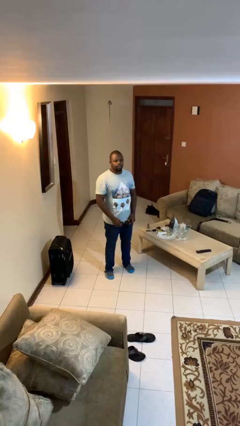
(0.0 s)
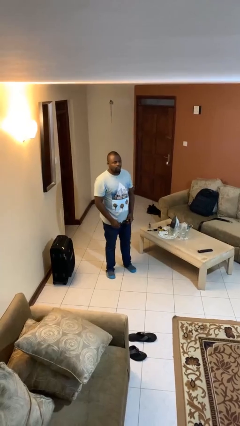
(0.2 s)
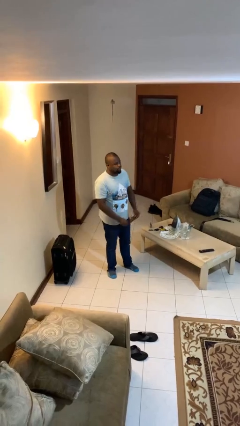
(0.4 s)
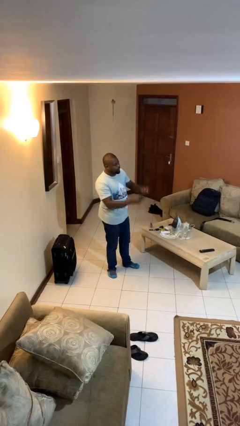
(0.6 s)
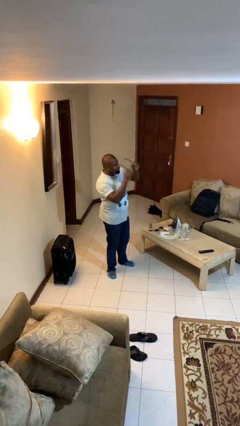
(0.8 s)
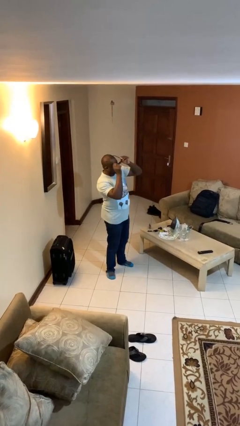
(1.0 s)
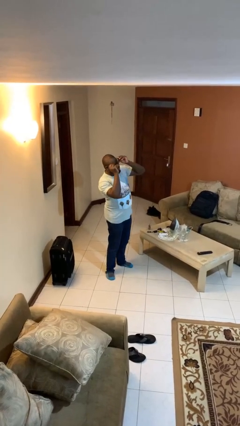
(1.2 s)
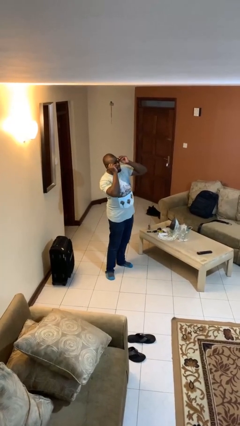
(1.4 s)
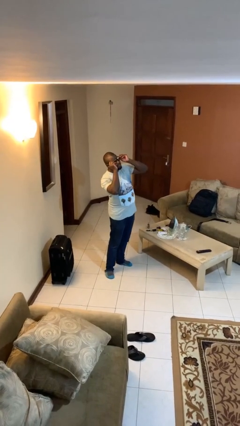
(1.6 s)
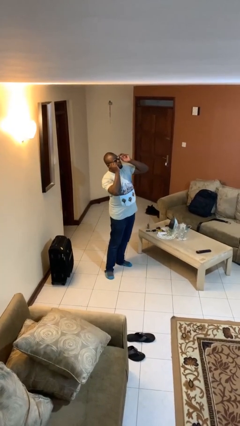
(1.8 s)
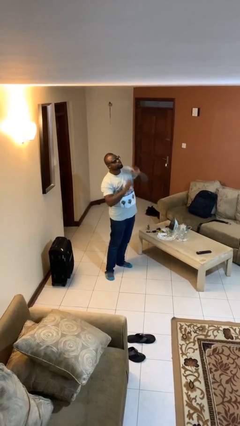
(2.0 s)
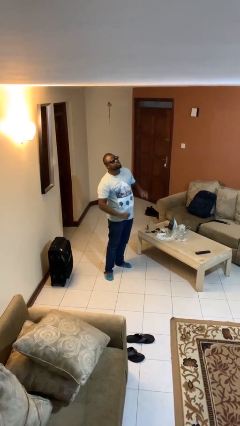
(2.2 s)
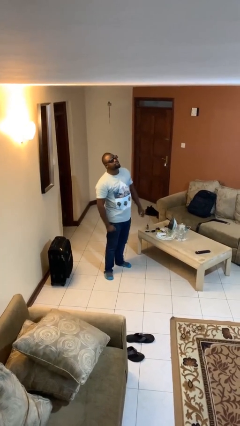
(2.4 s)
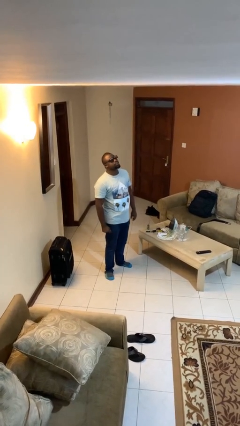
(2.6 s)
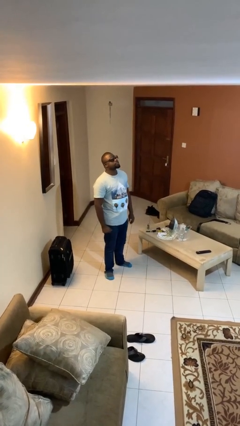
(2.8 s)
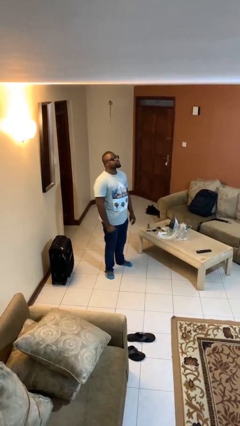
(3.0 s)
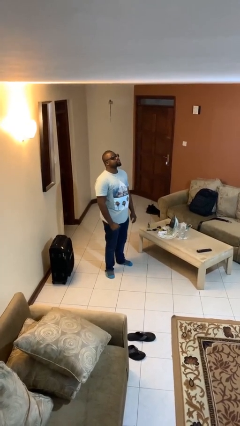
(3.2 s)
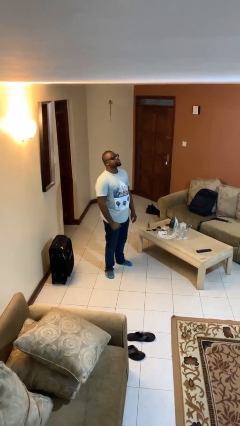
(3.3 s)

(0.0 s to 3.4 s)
person puts on sunglasses

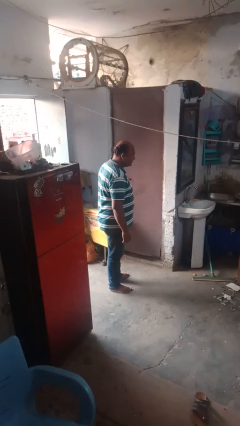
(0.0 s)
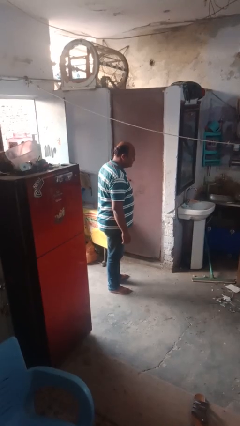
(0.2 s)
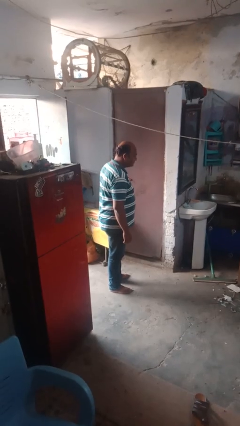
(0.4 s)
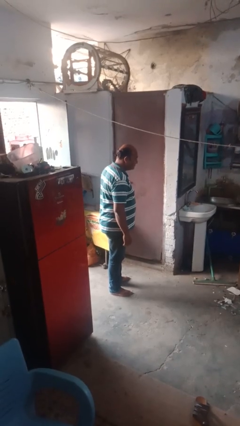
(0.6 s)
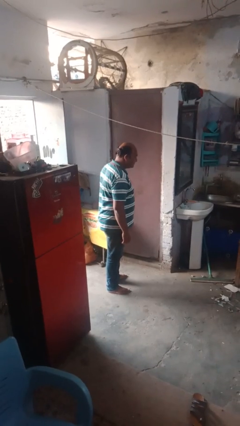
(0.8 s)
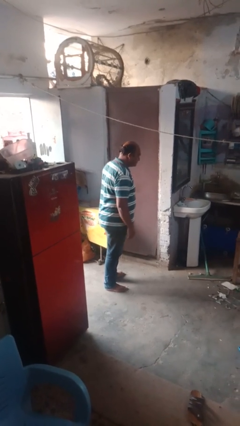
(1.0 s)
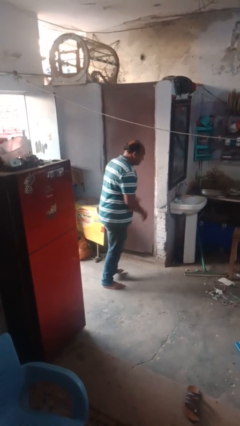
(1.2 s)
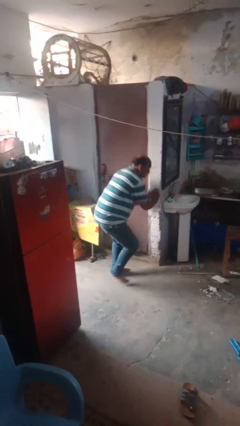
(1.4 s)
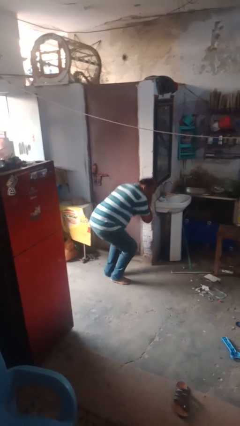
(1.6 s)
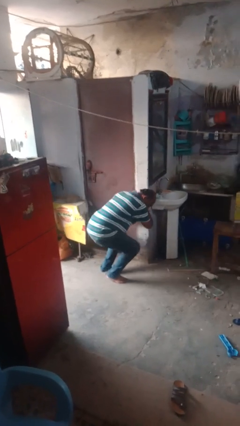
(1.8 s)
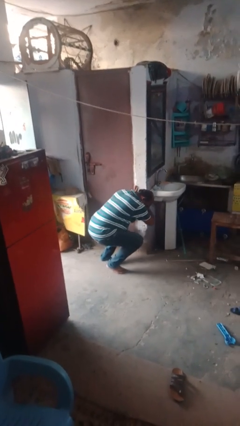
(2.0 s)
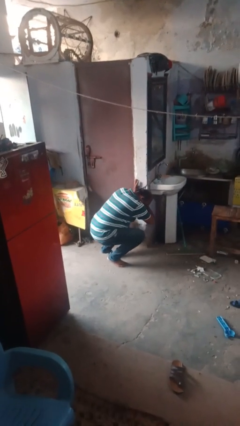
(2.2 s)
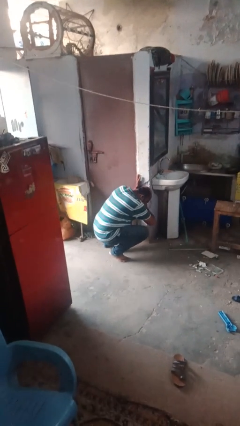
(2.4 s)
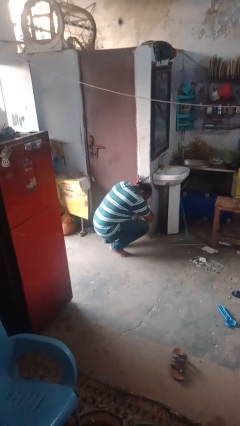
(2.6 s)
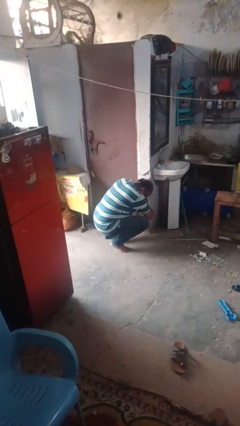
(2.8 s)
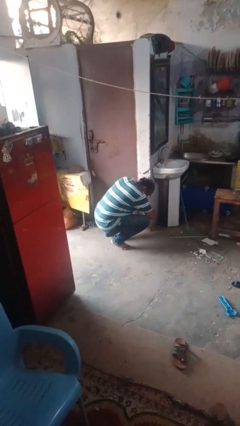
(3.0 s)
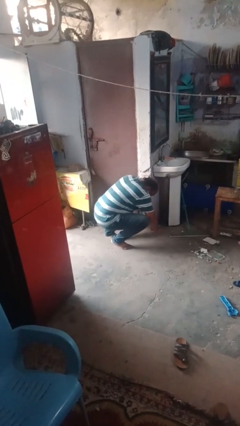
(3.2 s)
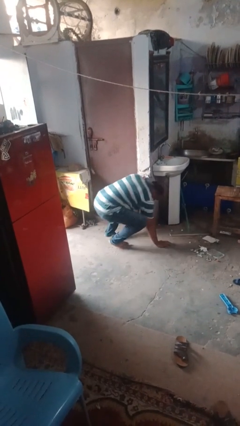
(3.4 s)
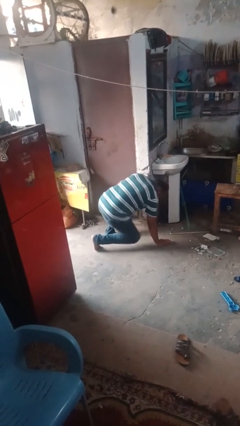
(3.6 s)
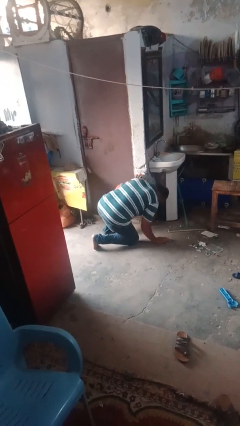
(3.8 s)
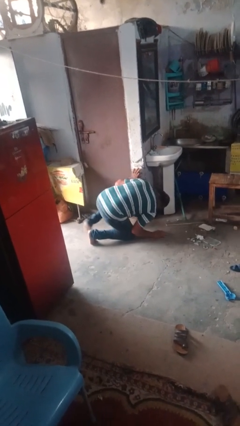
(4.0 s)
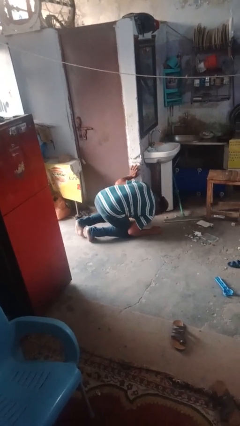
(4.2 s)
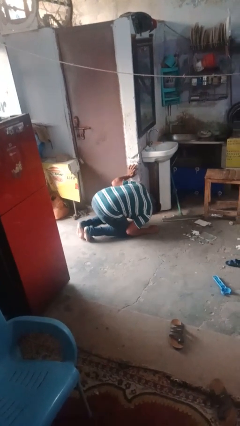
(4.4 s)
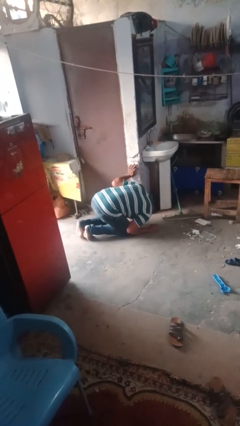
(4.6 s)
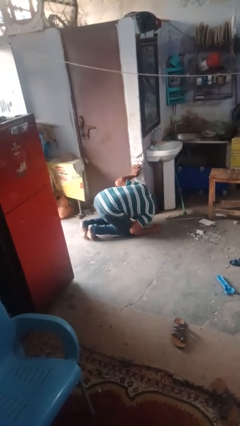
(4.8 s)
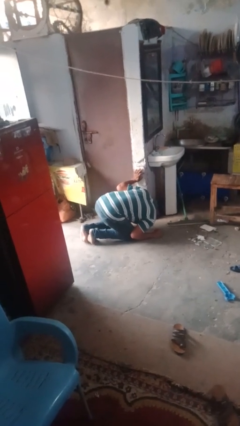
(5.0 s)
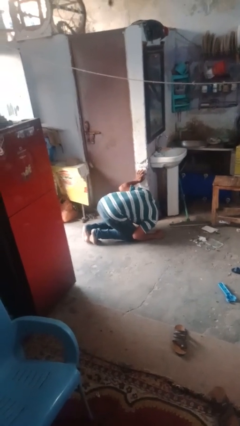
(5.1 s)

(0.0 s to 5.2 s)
person trips on object on floor

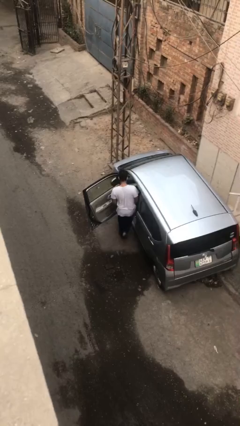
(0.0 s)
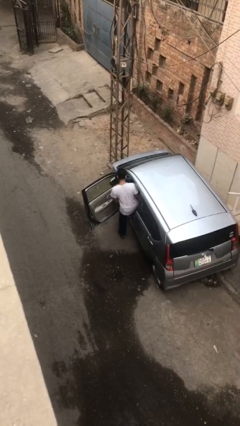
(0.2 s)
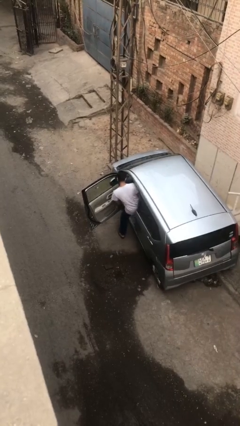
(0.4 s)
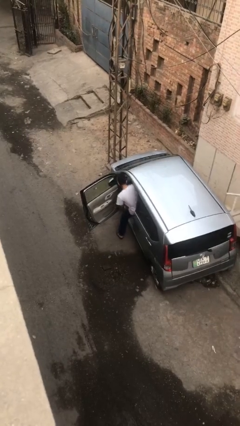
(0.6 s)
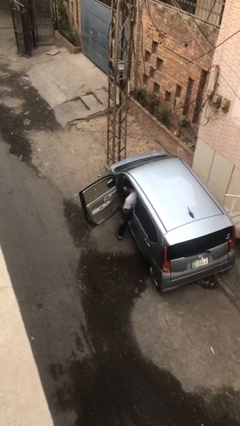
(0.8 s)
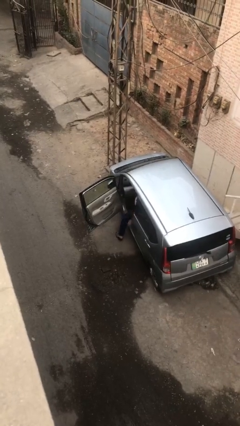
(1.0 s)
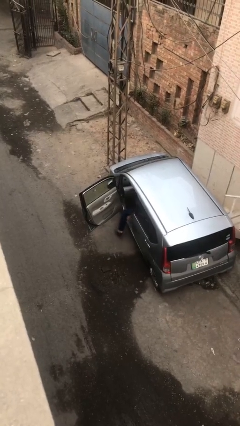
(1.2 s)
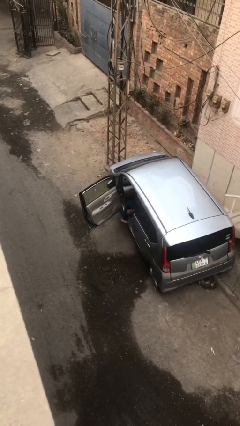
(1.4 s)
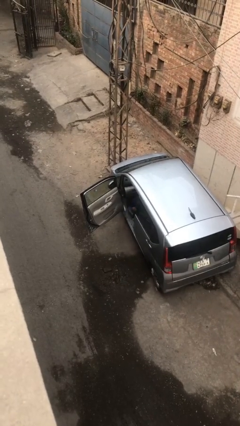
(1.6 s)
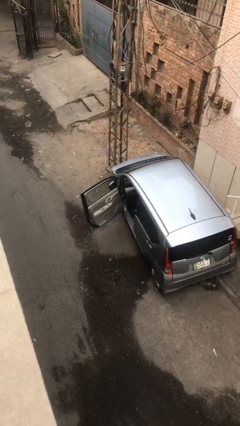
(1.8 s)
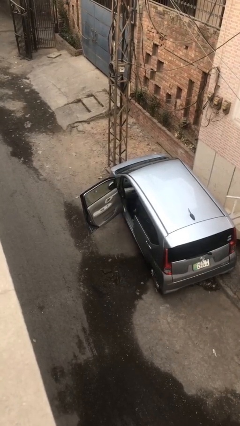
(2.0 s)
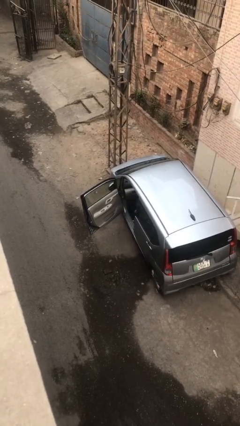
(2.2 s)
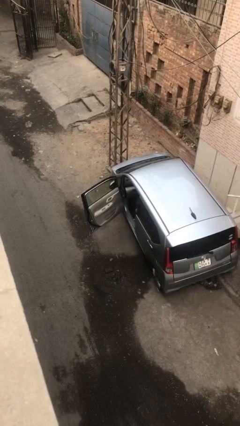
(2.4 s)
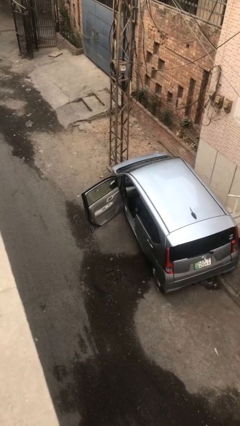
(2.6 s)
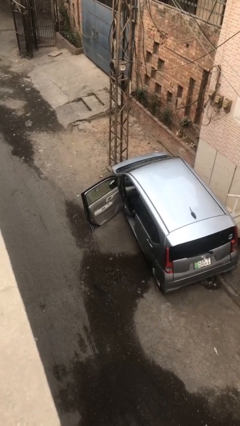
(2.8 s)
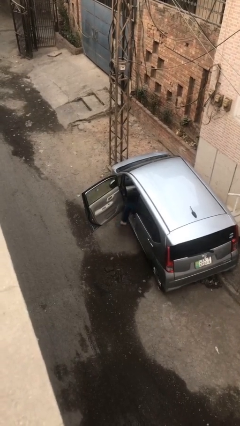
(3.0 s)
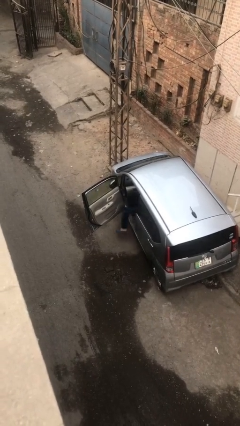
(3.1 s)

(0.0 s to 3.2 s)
person enters car

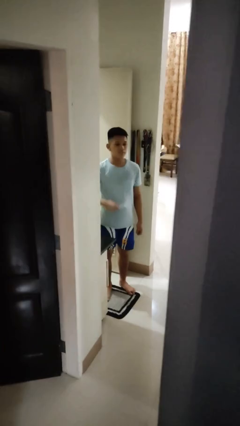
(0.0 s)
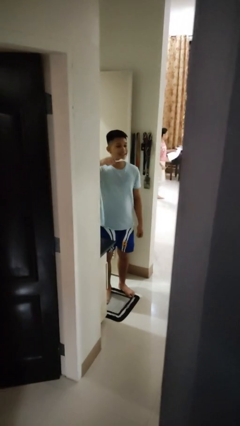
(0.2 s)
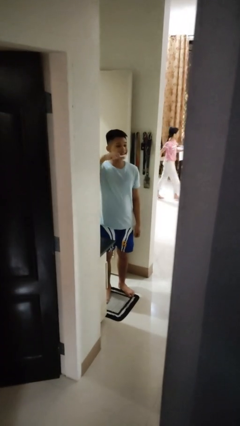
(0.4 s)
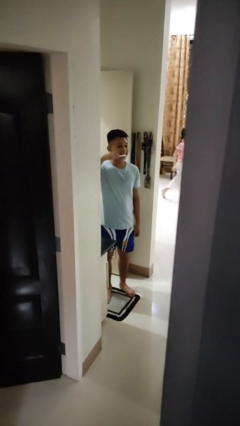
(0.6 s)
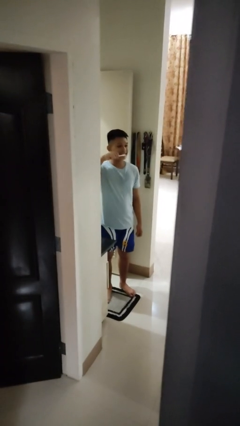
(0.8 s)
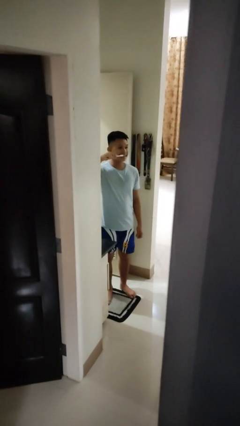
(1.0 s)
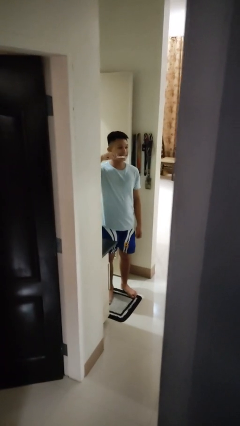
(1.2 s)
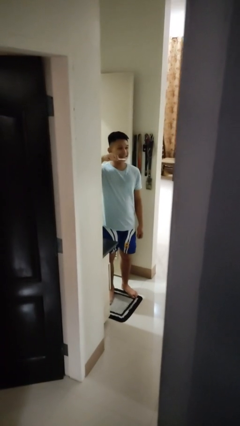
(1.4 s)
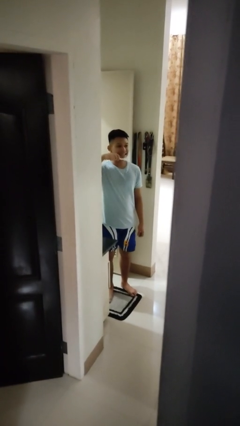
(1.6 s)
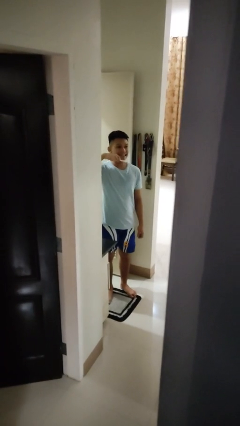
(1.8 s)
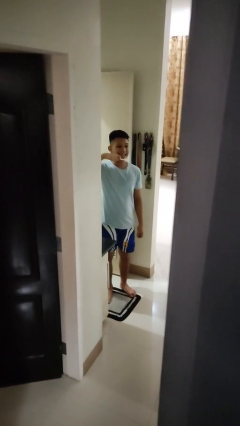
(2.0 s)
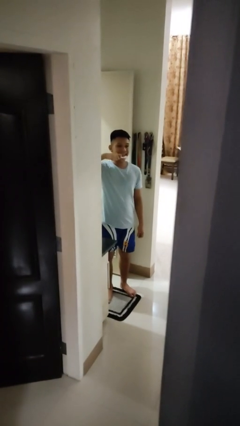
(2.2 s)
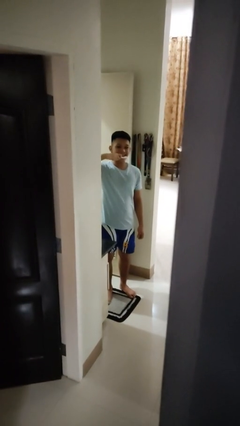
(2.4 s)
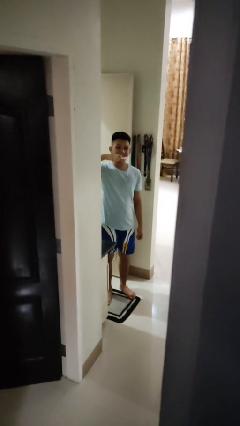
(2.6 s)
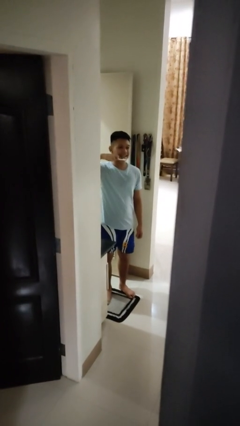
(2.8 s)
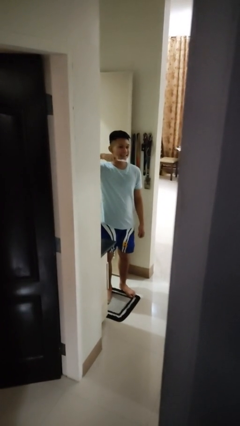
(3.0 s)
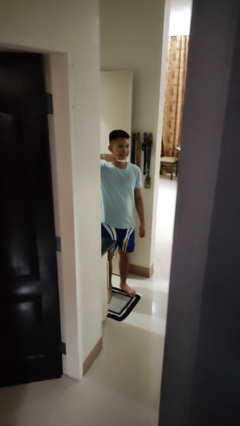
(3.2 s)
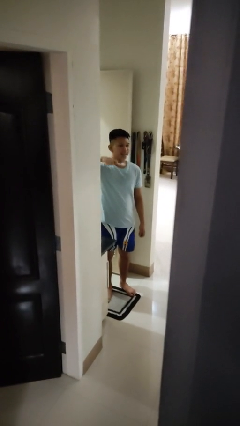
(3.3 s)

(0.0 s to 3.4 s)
person brushes teeth

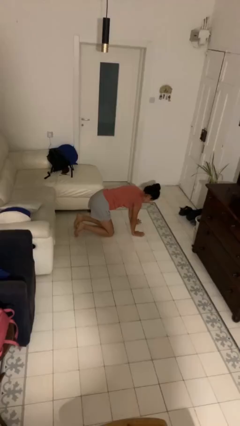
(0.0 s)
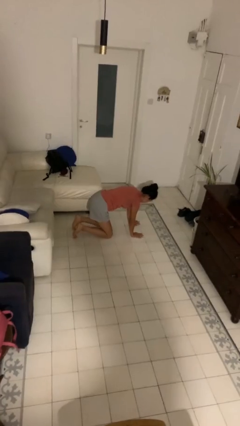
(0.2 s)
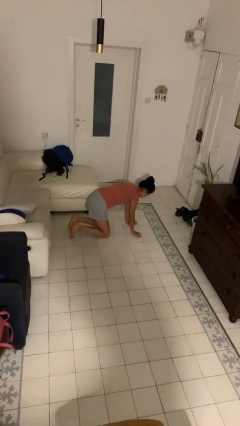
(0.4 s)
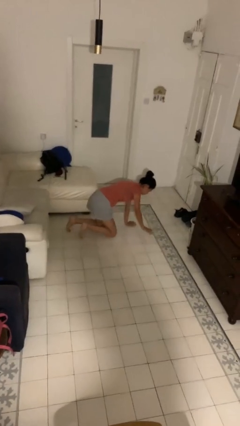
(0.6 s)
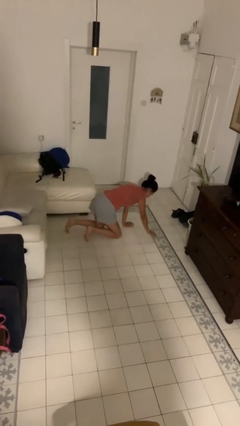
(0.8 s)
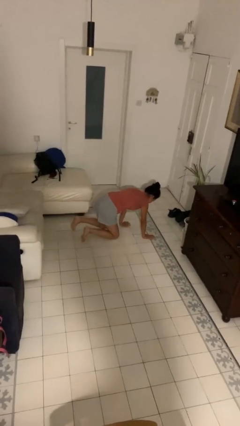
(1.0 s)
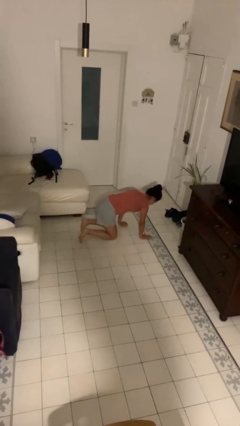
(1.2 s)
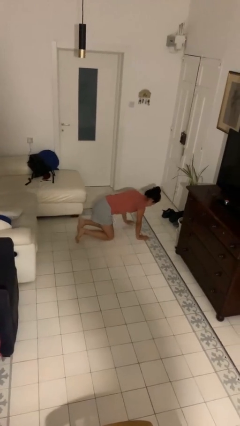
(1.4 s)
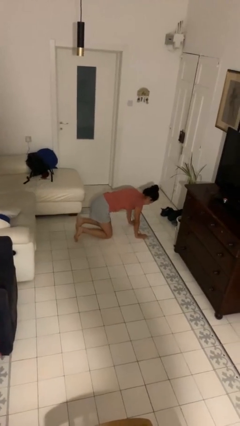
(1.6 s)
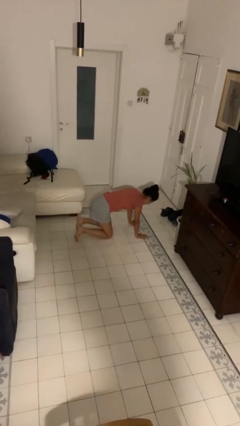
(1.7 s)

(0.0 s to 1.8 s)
person crawls

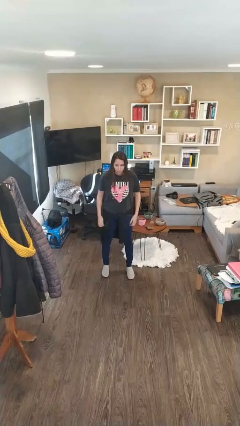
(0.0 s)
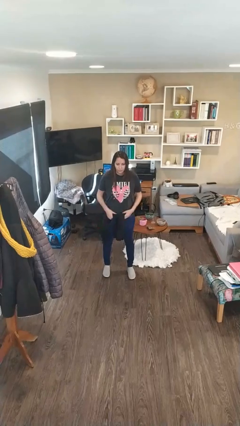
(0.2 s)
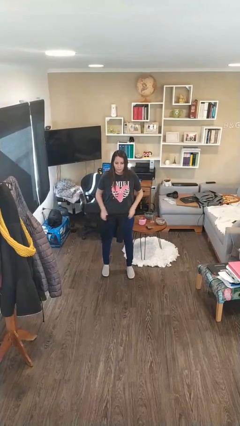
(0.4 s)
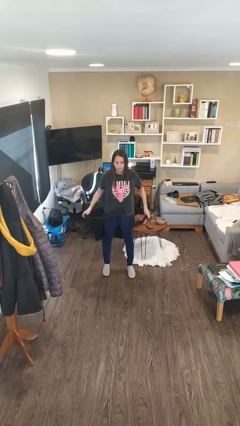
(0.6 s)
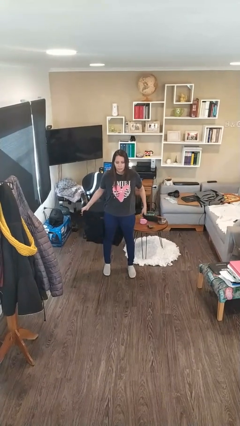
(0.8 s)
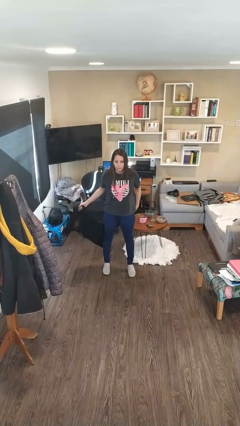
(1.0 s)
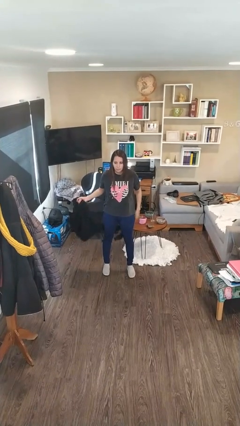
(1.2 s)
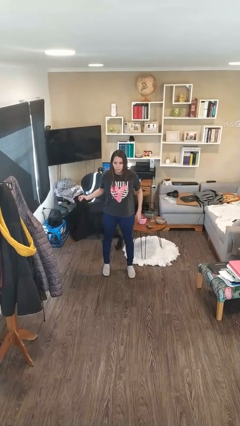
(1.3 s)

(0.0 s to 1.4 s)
person unties jacket around waist
